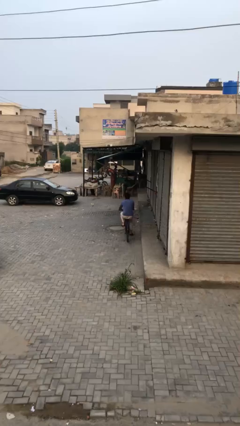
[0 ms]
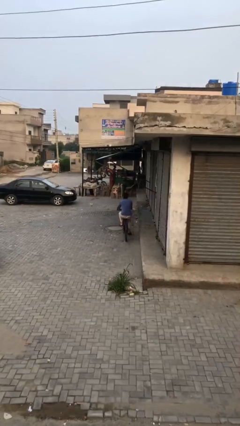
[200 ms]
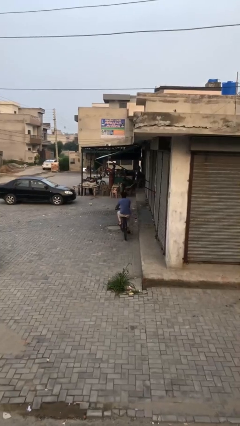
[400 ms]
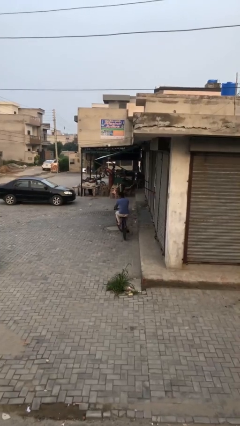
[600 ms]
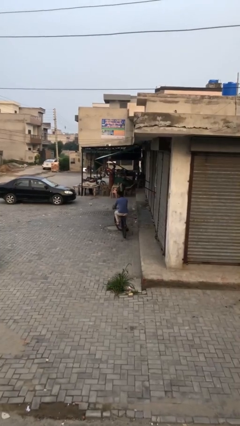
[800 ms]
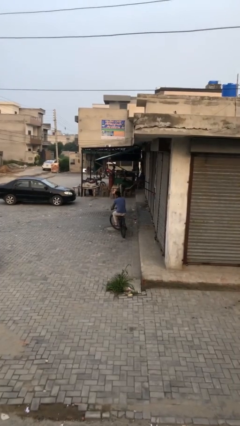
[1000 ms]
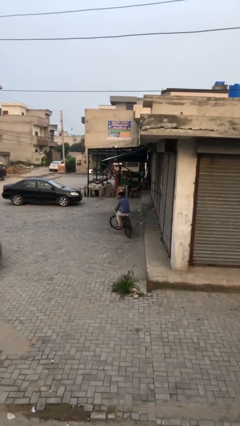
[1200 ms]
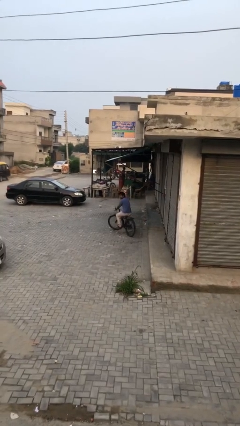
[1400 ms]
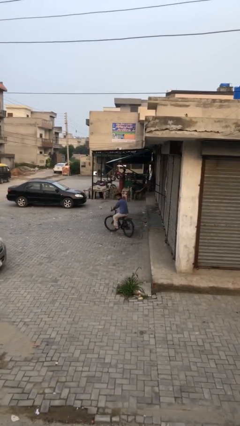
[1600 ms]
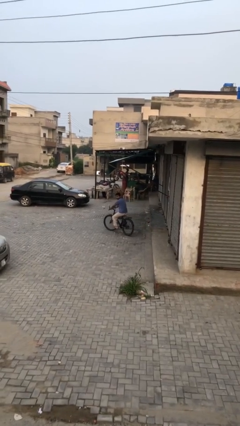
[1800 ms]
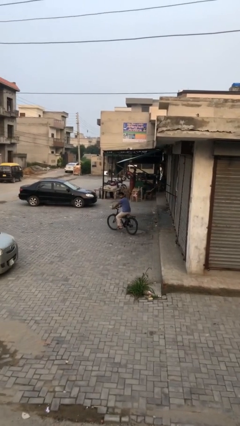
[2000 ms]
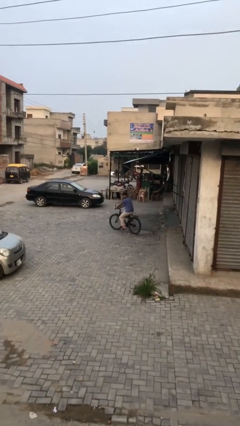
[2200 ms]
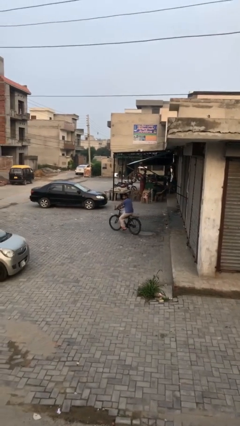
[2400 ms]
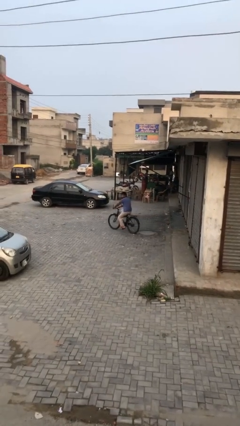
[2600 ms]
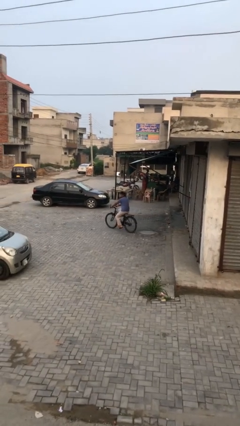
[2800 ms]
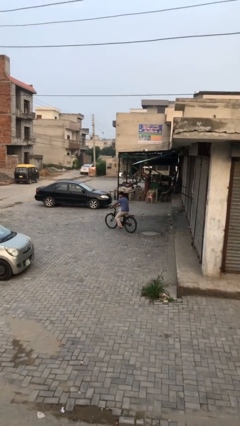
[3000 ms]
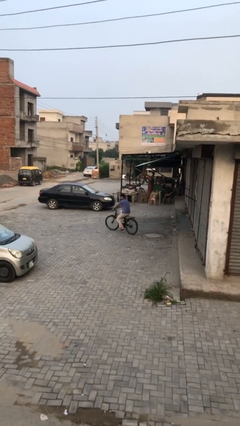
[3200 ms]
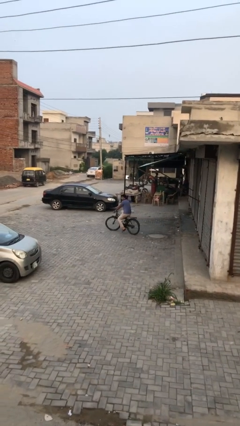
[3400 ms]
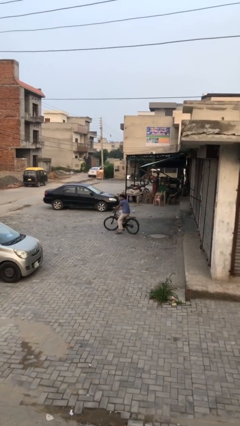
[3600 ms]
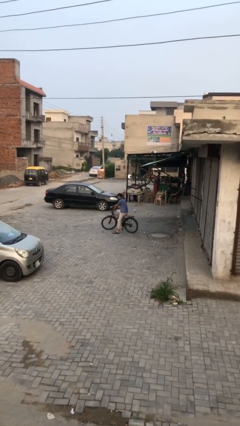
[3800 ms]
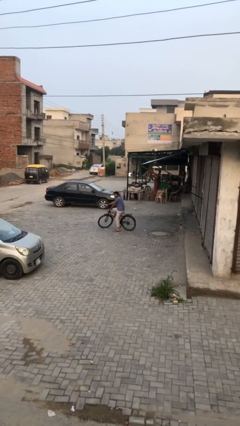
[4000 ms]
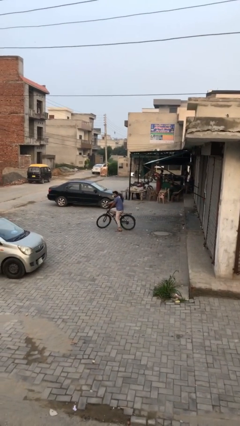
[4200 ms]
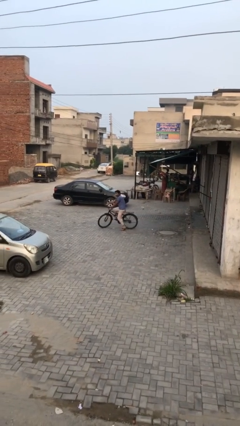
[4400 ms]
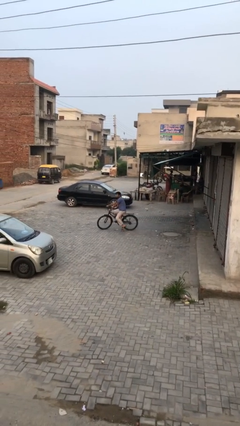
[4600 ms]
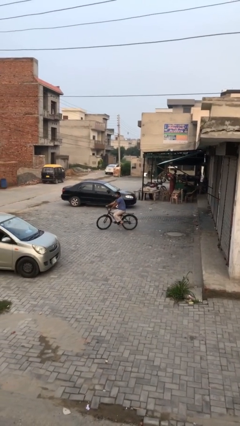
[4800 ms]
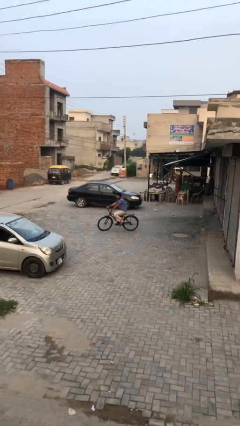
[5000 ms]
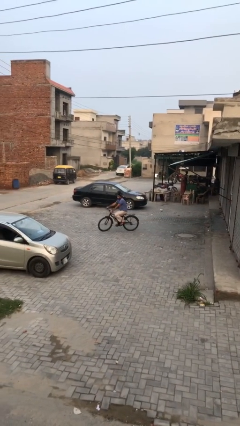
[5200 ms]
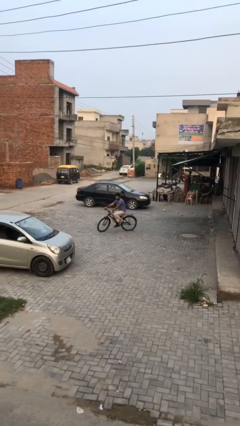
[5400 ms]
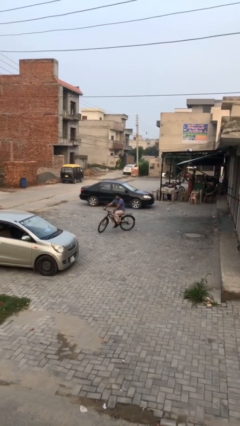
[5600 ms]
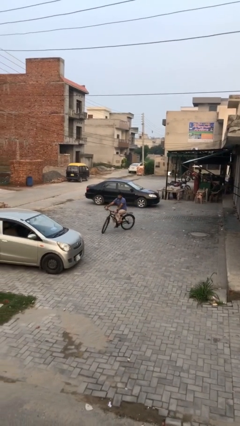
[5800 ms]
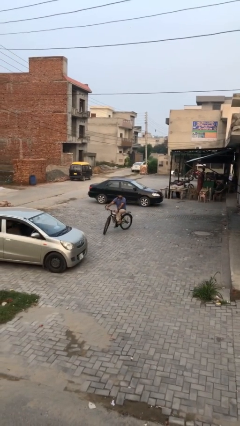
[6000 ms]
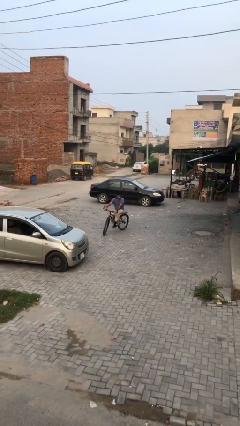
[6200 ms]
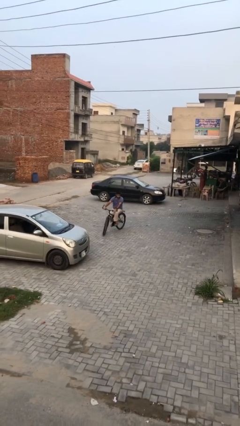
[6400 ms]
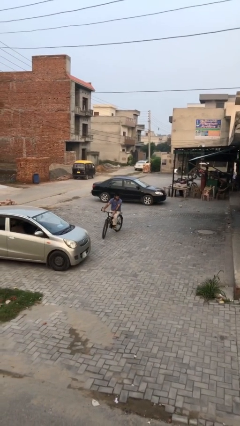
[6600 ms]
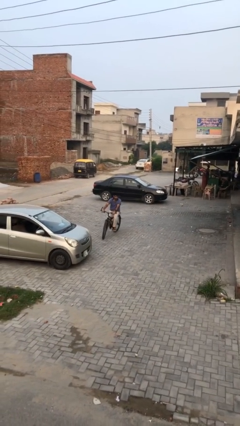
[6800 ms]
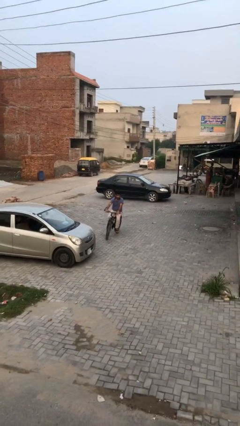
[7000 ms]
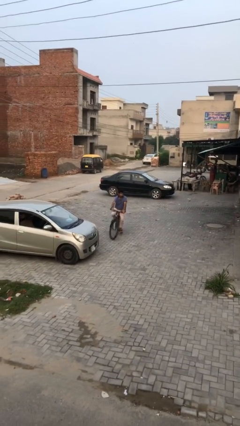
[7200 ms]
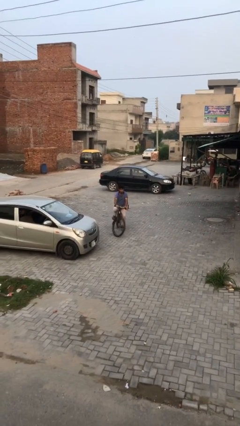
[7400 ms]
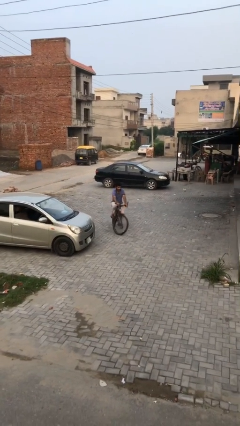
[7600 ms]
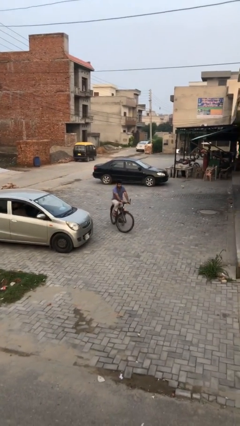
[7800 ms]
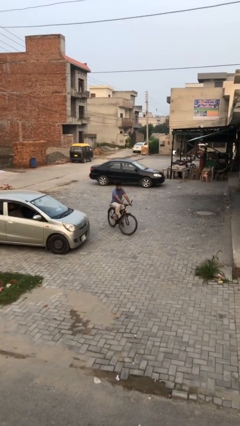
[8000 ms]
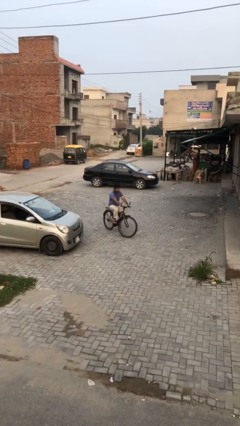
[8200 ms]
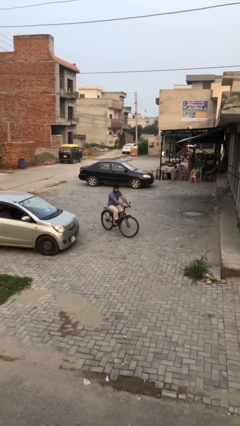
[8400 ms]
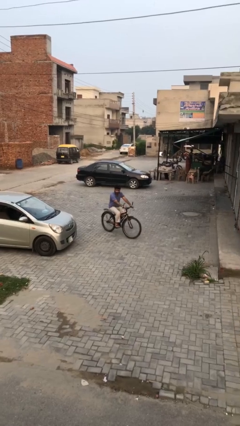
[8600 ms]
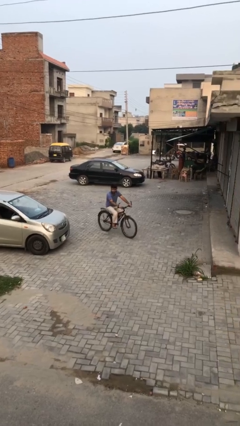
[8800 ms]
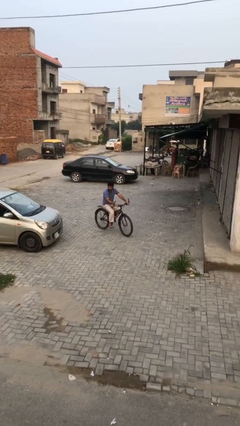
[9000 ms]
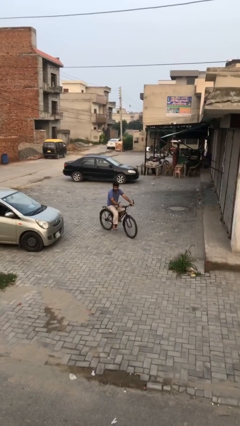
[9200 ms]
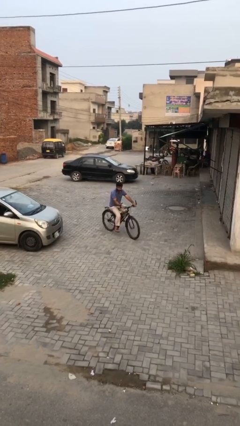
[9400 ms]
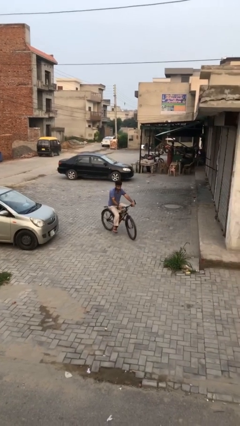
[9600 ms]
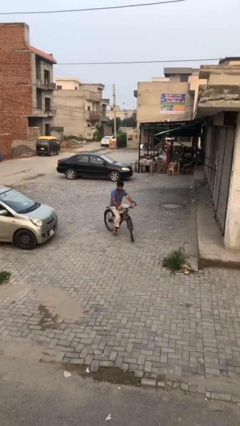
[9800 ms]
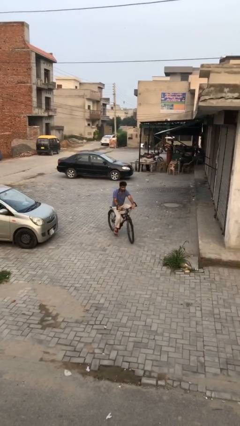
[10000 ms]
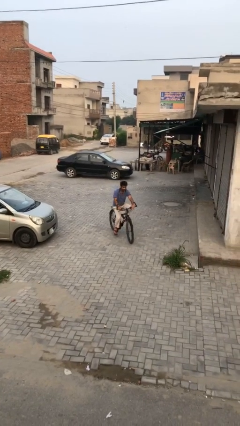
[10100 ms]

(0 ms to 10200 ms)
person rides bicycle

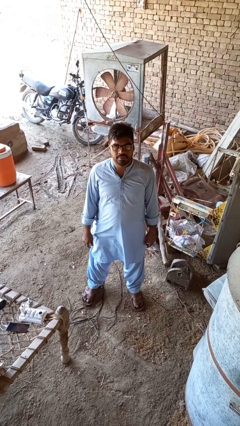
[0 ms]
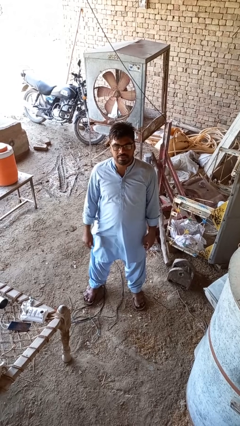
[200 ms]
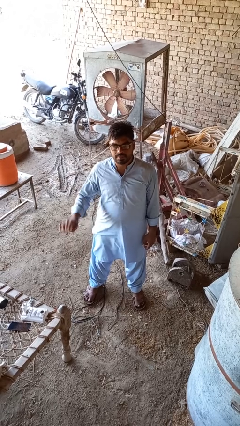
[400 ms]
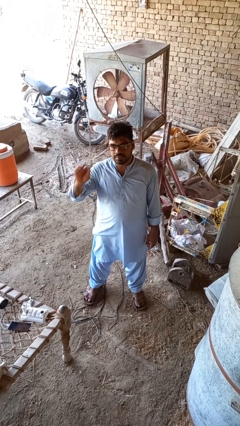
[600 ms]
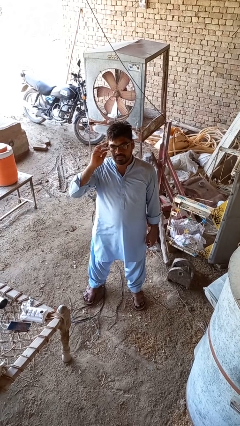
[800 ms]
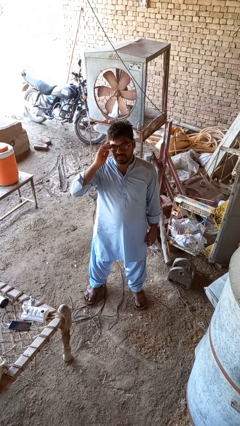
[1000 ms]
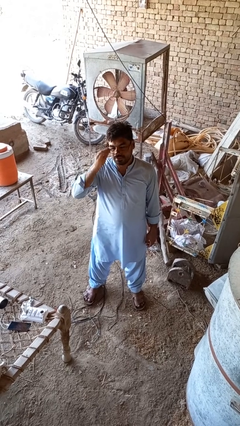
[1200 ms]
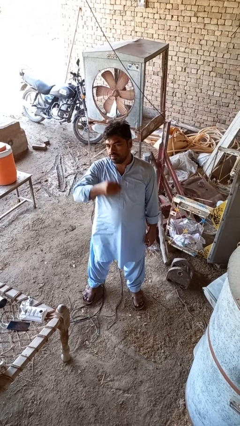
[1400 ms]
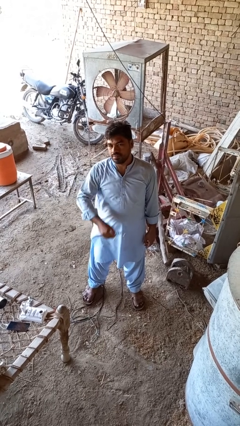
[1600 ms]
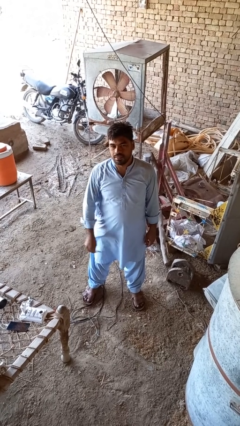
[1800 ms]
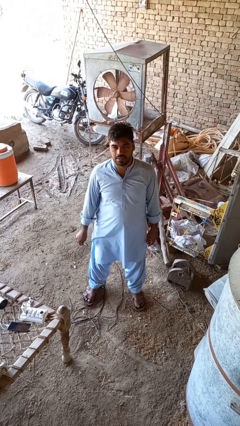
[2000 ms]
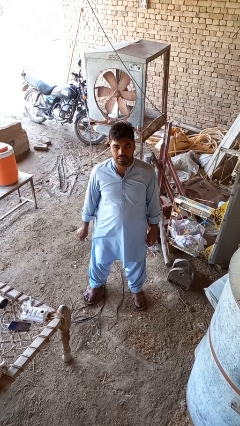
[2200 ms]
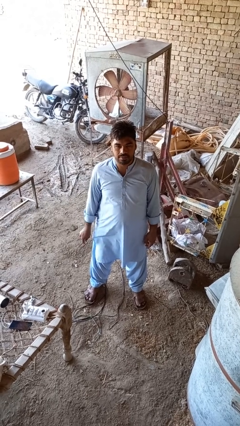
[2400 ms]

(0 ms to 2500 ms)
person takes off glasses

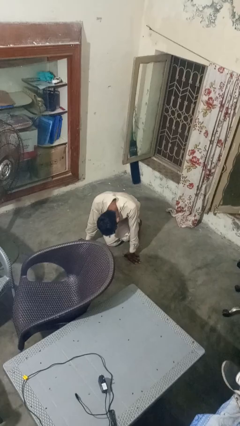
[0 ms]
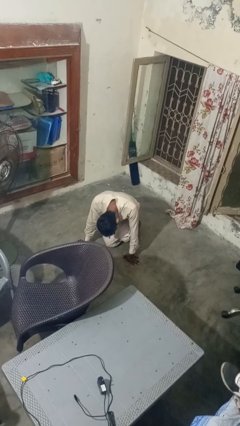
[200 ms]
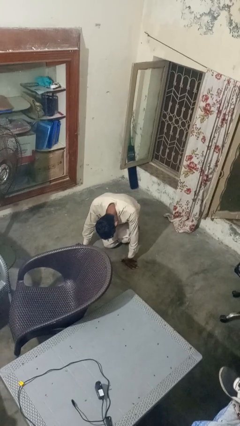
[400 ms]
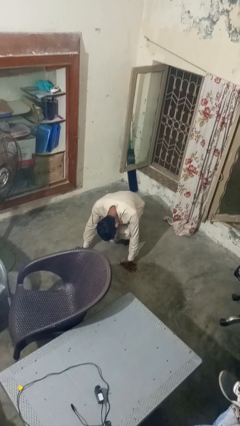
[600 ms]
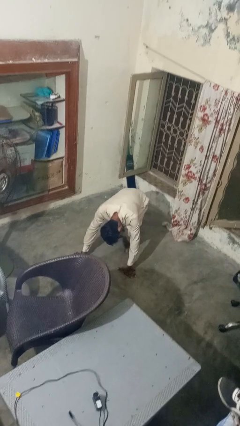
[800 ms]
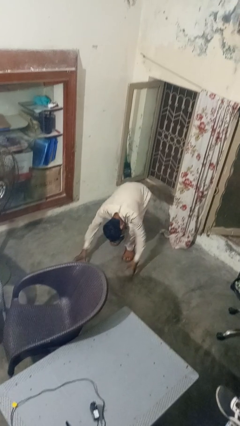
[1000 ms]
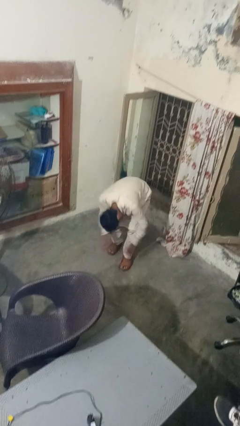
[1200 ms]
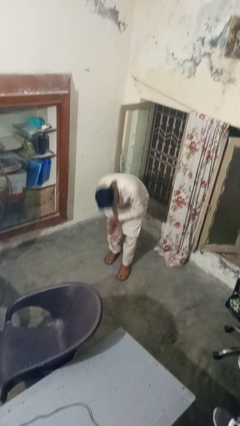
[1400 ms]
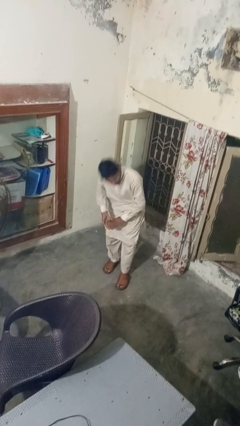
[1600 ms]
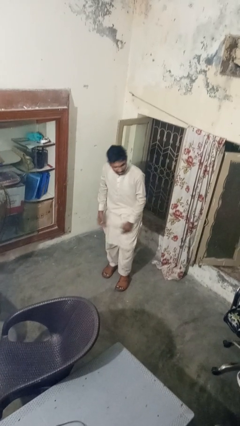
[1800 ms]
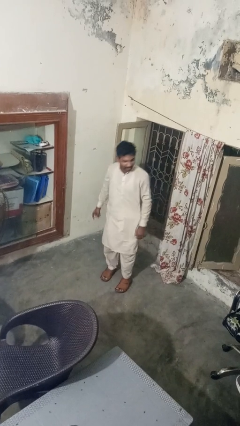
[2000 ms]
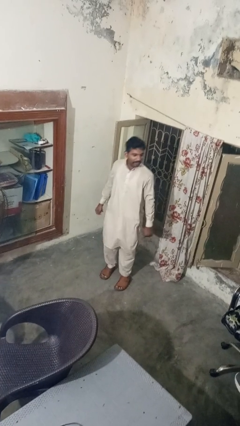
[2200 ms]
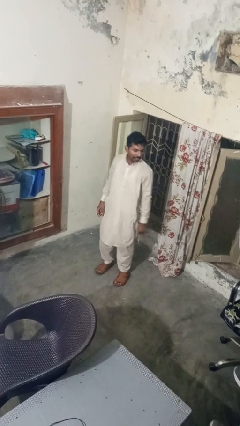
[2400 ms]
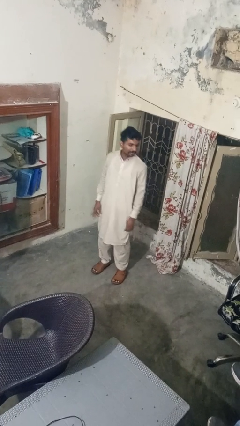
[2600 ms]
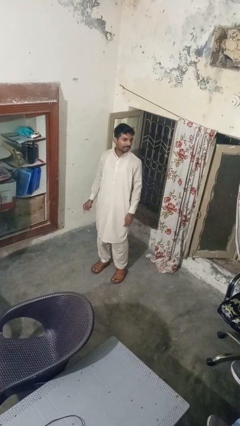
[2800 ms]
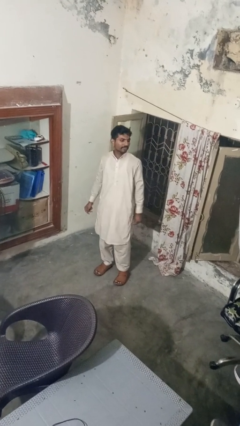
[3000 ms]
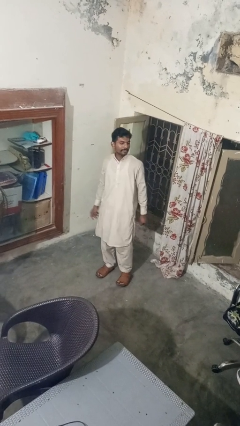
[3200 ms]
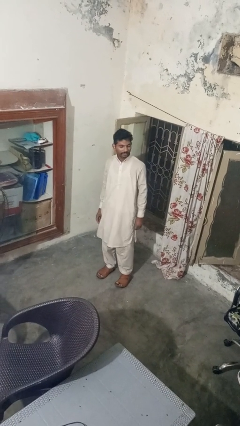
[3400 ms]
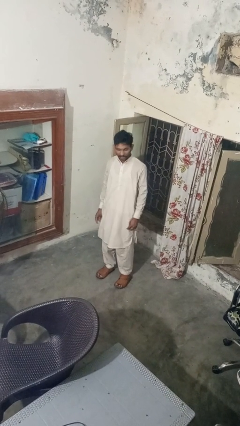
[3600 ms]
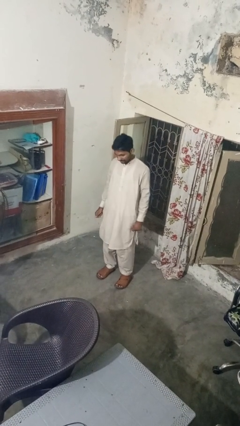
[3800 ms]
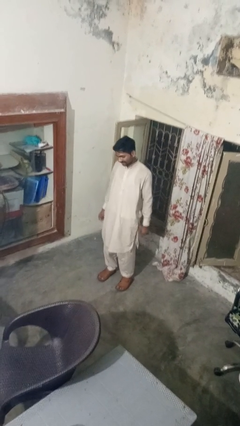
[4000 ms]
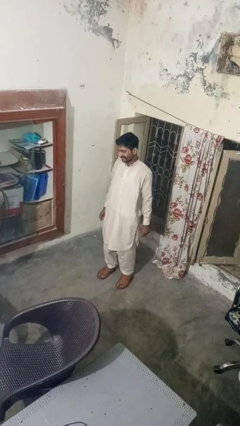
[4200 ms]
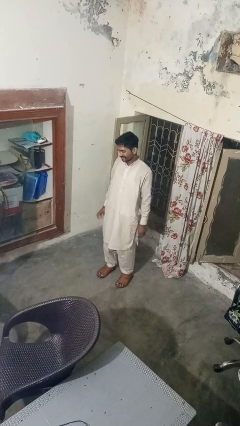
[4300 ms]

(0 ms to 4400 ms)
person stands up from floor

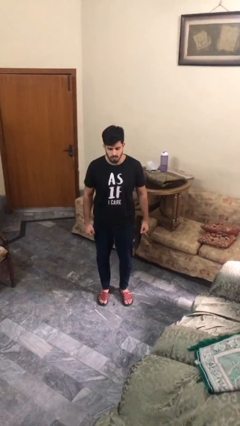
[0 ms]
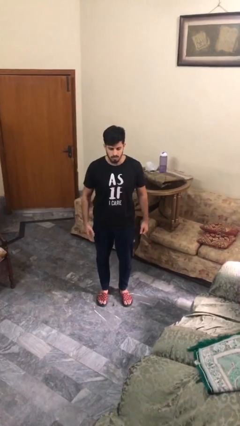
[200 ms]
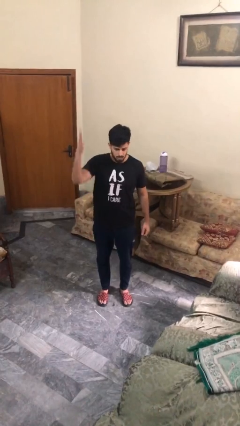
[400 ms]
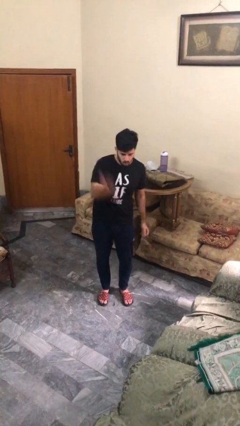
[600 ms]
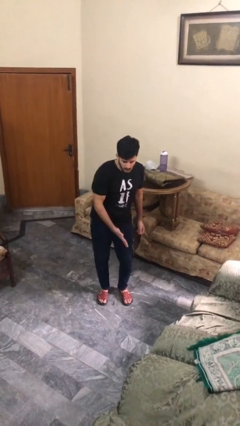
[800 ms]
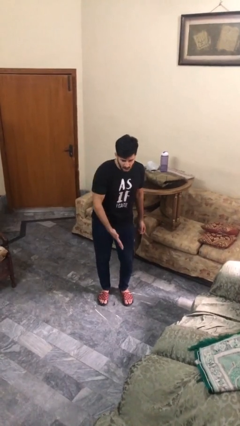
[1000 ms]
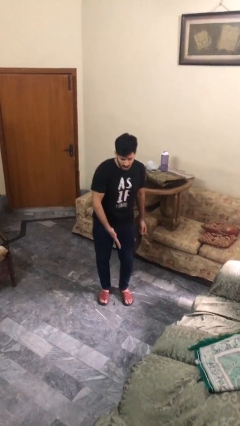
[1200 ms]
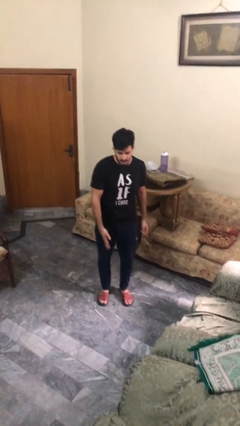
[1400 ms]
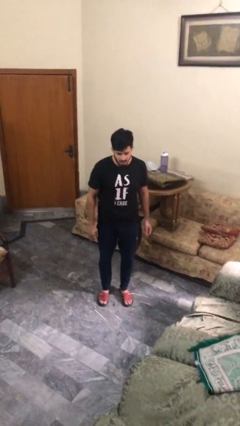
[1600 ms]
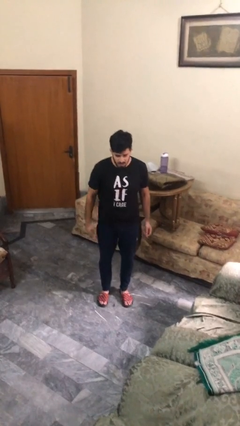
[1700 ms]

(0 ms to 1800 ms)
person karate chop
